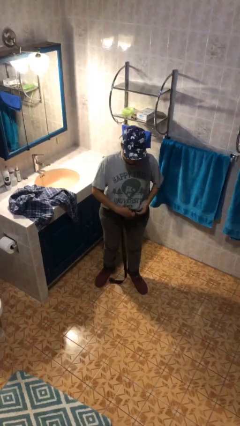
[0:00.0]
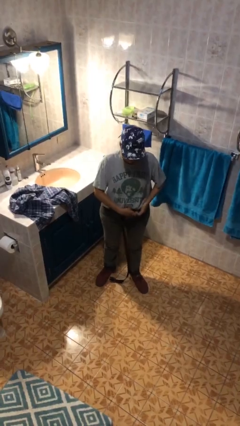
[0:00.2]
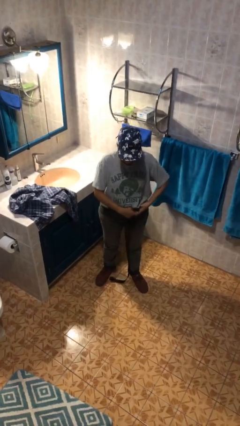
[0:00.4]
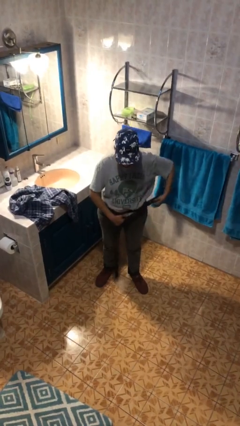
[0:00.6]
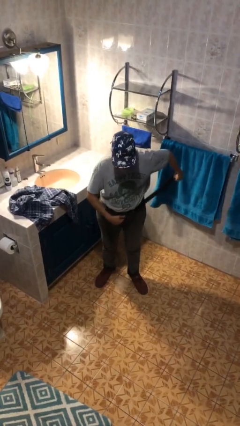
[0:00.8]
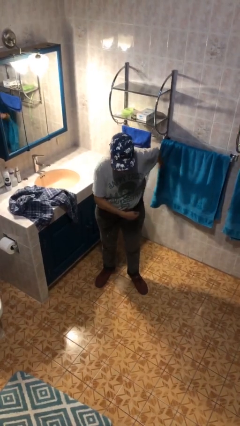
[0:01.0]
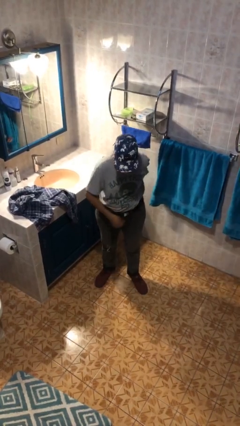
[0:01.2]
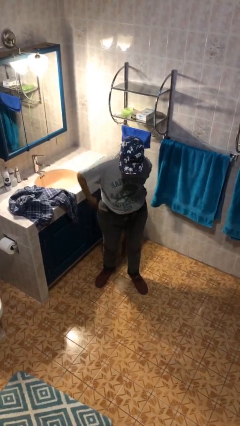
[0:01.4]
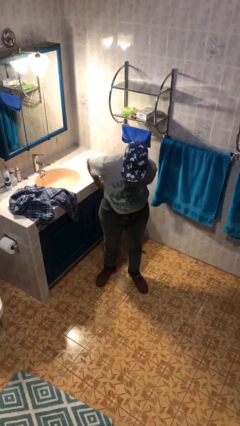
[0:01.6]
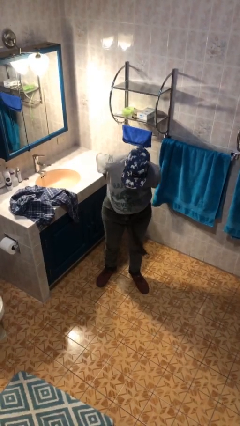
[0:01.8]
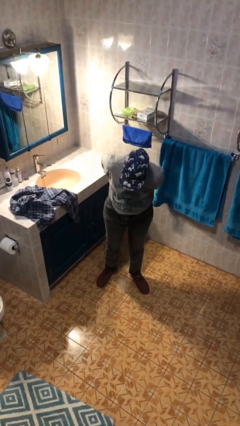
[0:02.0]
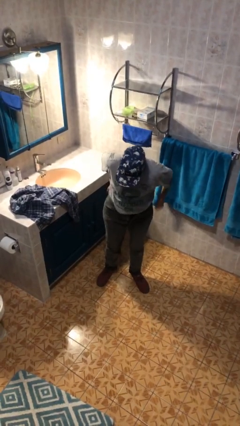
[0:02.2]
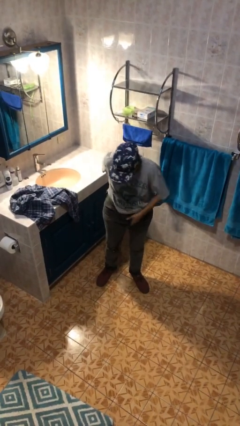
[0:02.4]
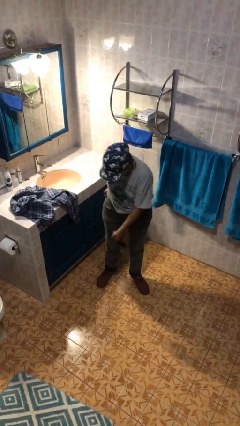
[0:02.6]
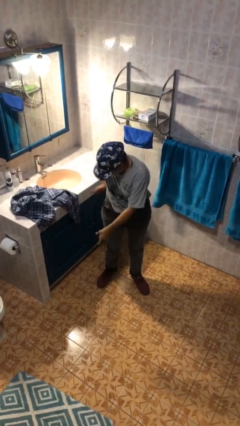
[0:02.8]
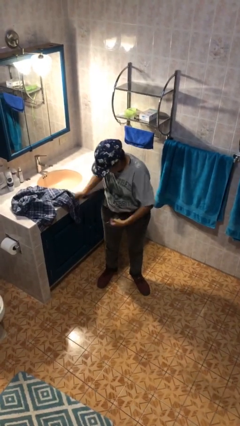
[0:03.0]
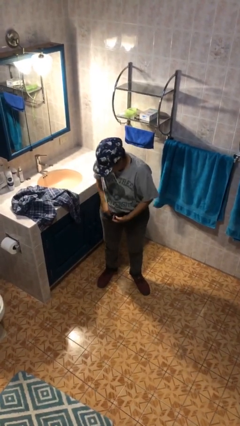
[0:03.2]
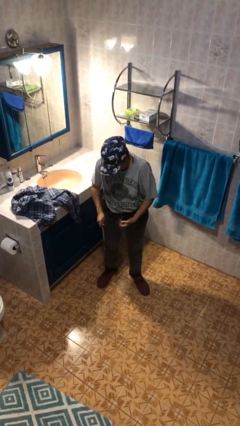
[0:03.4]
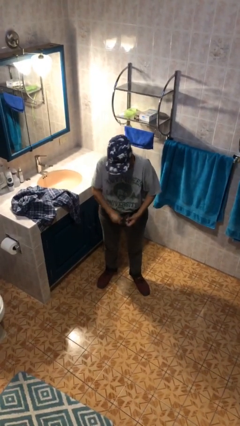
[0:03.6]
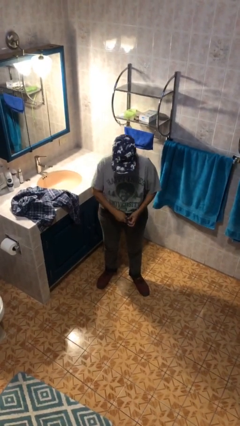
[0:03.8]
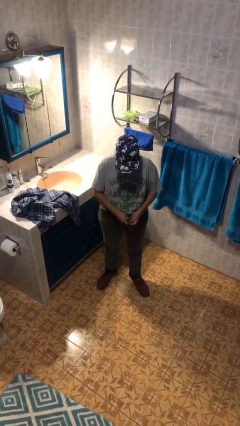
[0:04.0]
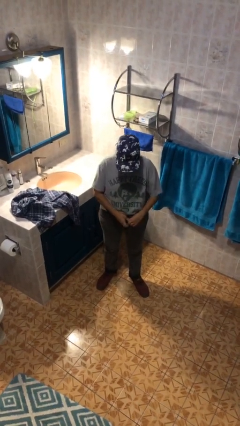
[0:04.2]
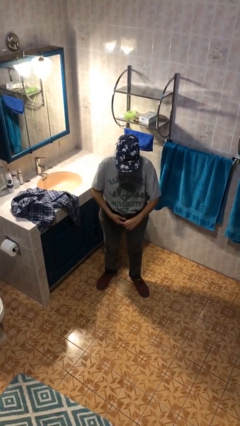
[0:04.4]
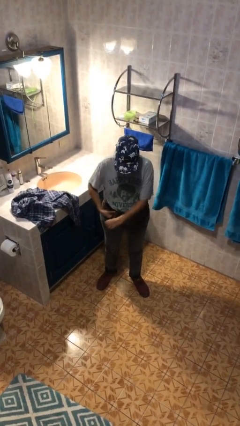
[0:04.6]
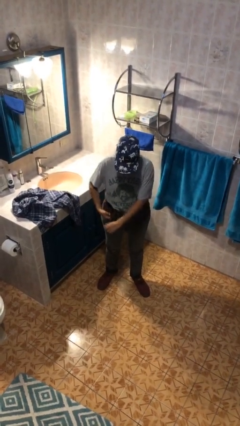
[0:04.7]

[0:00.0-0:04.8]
person puts on belt

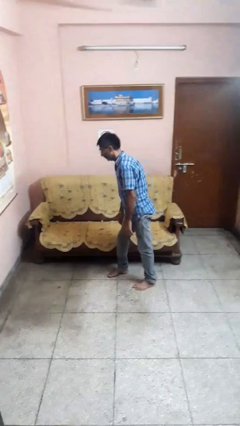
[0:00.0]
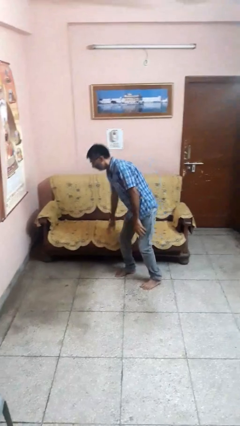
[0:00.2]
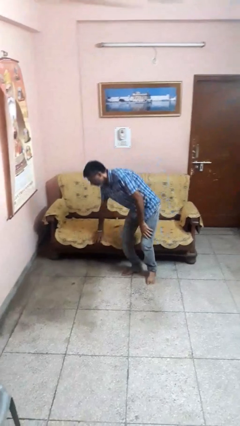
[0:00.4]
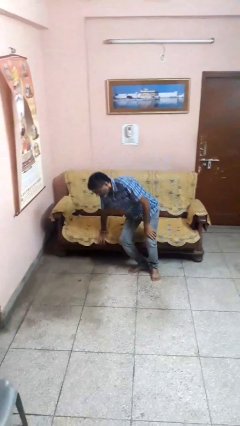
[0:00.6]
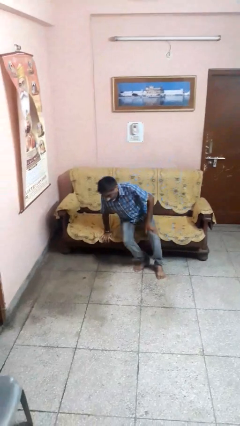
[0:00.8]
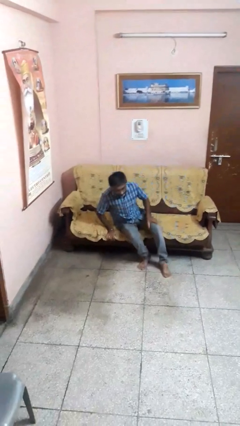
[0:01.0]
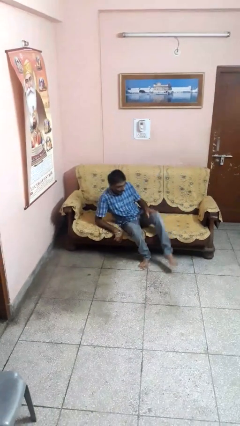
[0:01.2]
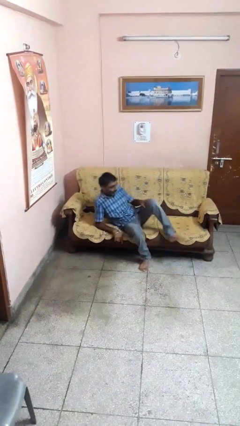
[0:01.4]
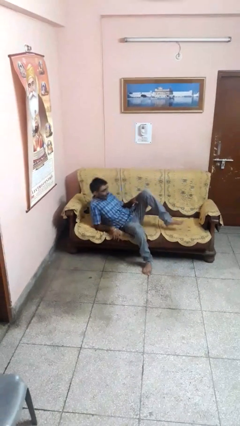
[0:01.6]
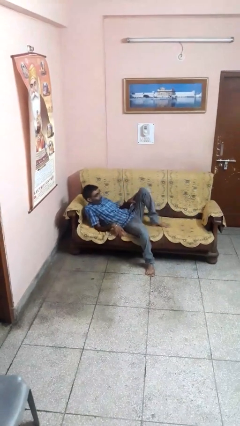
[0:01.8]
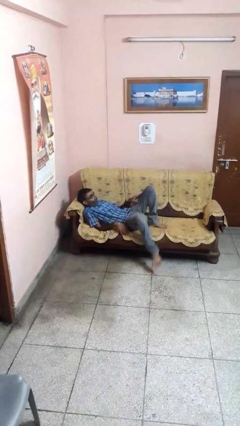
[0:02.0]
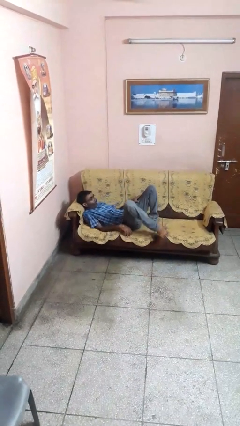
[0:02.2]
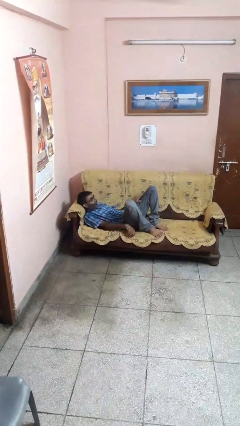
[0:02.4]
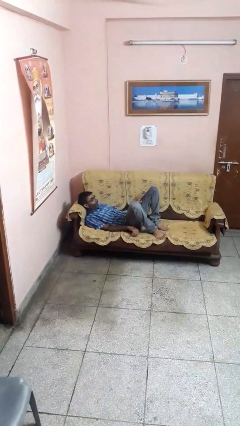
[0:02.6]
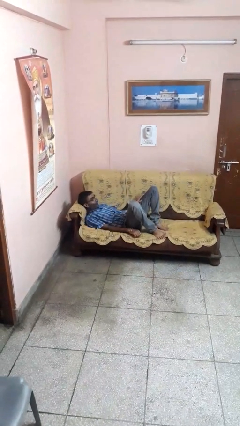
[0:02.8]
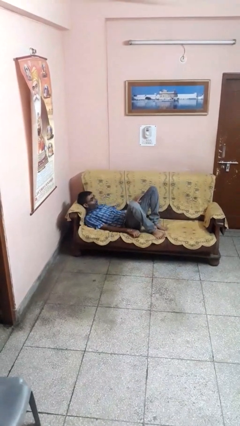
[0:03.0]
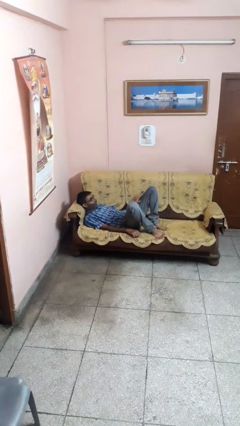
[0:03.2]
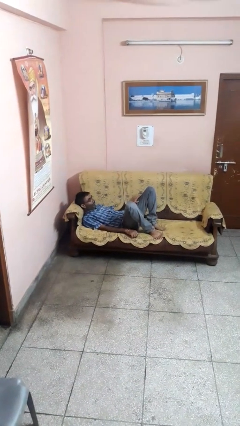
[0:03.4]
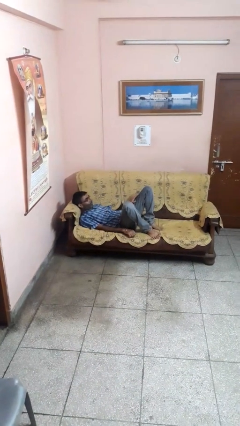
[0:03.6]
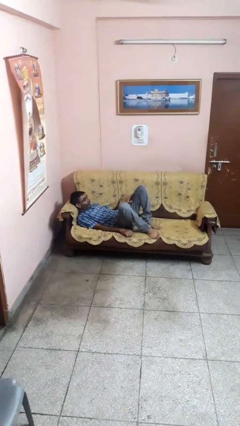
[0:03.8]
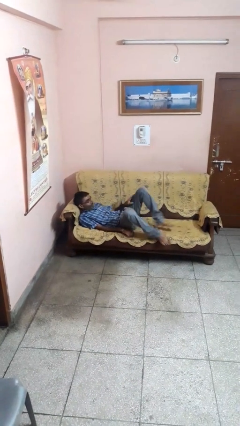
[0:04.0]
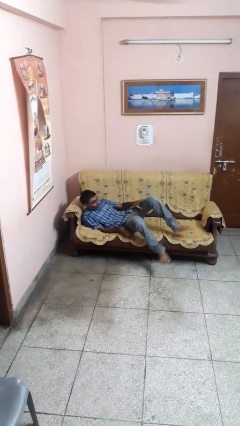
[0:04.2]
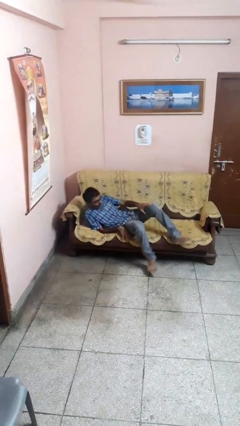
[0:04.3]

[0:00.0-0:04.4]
person lies down on couch

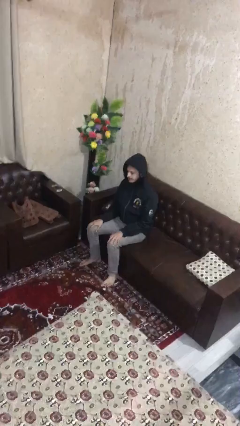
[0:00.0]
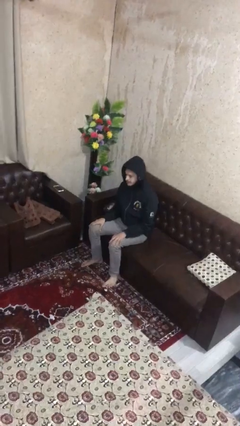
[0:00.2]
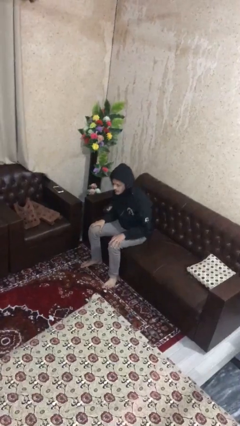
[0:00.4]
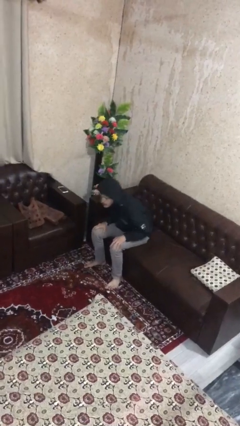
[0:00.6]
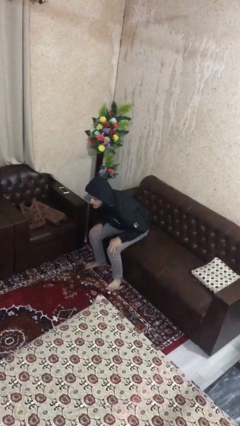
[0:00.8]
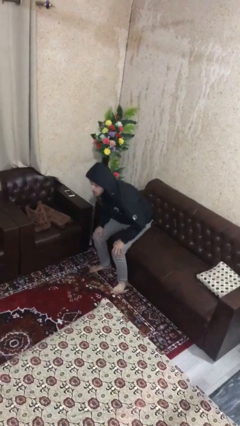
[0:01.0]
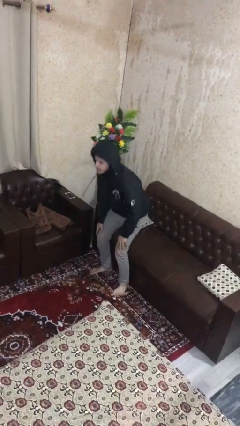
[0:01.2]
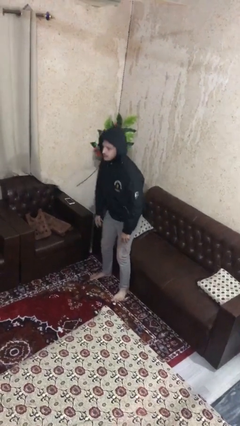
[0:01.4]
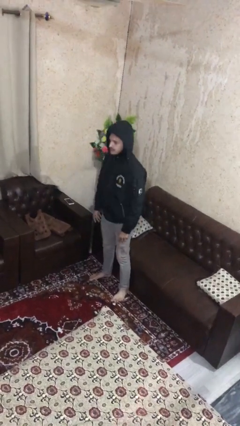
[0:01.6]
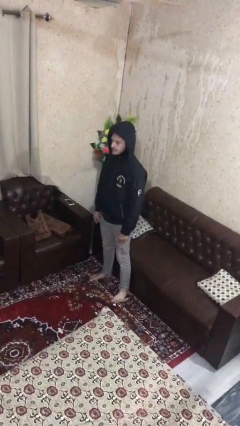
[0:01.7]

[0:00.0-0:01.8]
person stands up

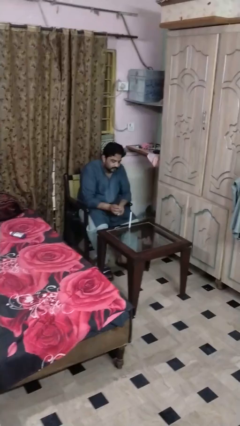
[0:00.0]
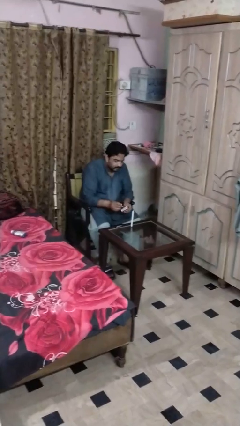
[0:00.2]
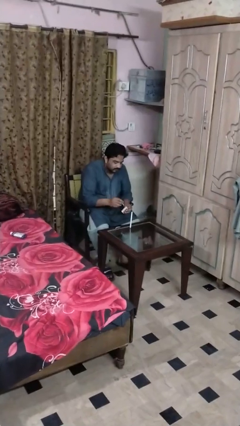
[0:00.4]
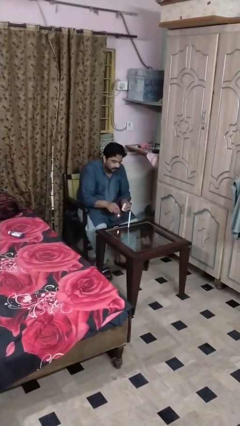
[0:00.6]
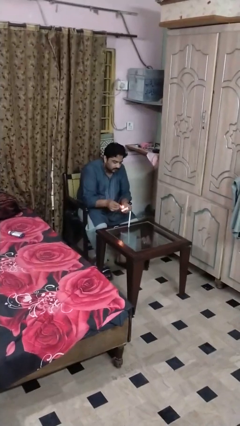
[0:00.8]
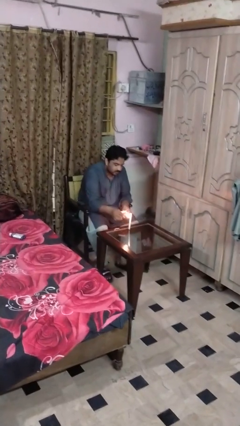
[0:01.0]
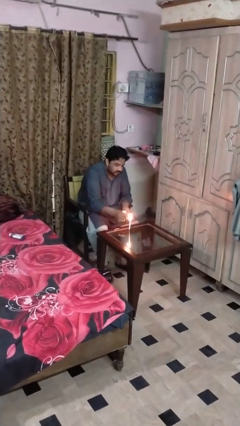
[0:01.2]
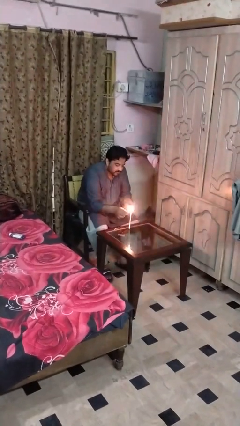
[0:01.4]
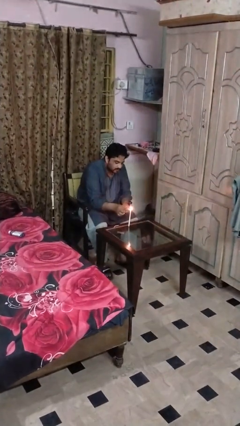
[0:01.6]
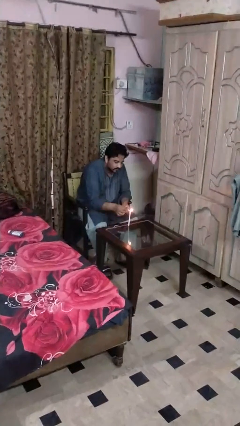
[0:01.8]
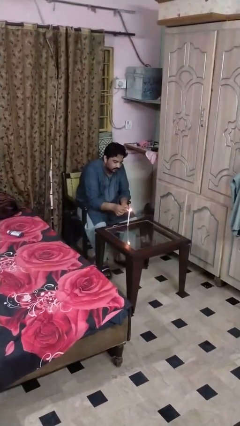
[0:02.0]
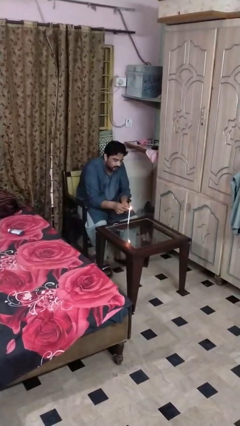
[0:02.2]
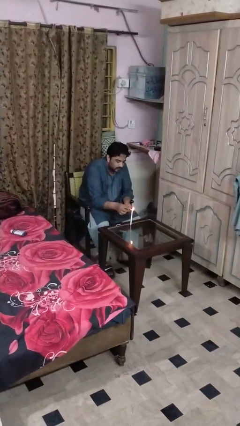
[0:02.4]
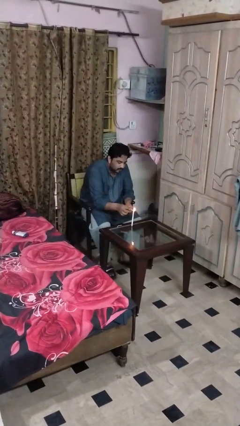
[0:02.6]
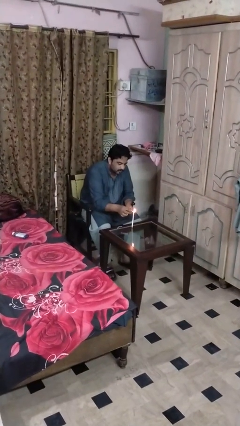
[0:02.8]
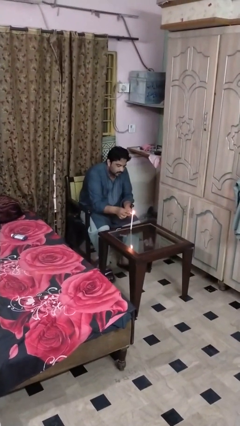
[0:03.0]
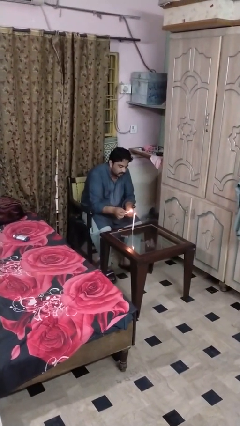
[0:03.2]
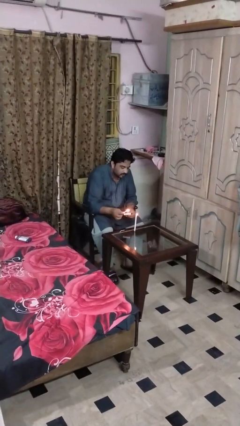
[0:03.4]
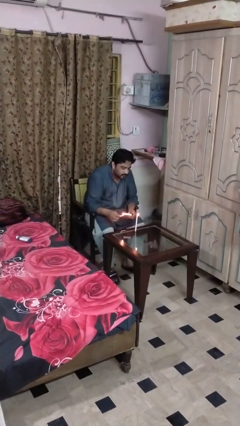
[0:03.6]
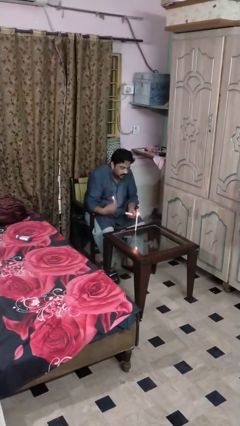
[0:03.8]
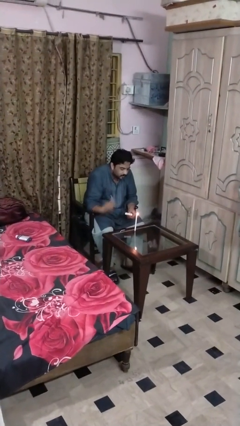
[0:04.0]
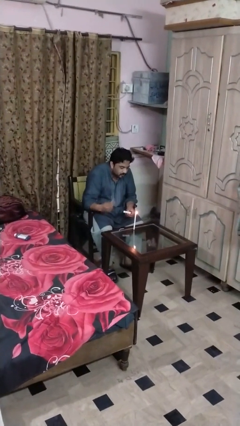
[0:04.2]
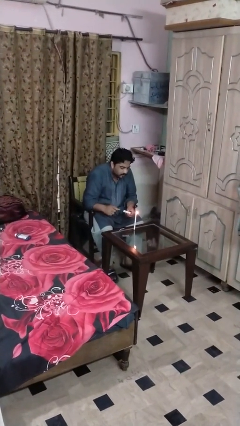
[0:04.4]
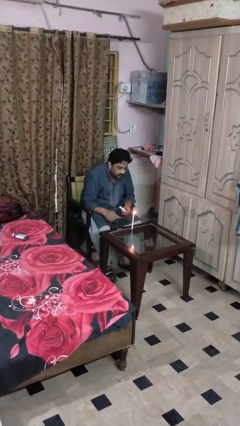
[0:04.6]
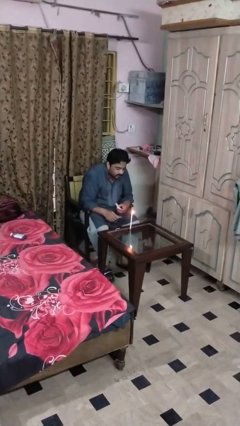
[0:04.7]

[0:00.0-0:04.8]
person lights candle

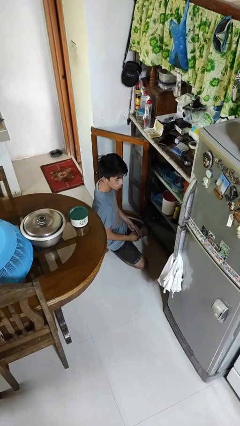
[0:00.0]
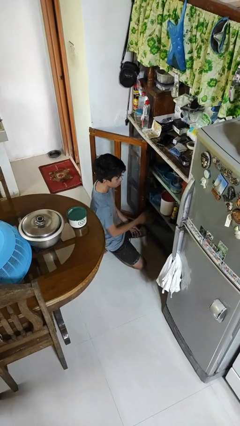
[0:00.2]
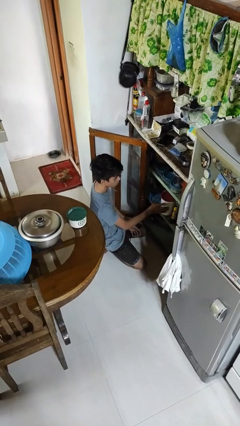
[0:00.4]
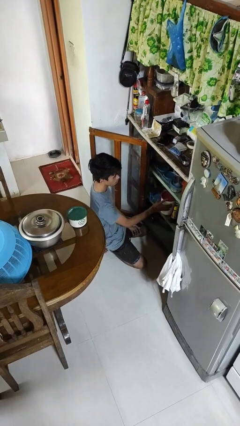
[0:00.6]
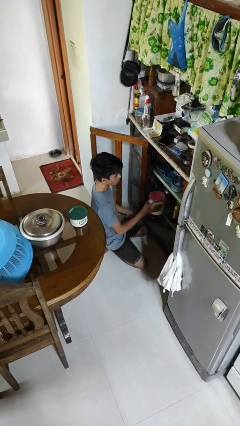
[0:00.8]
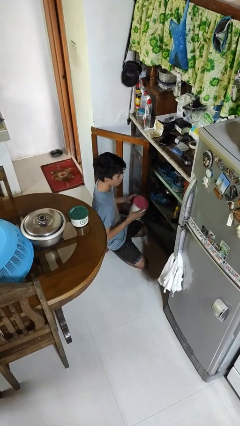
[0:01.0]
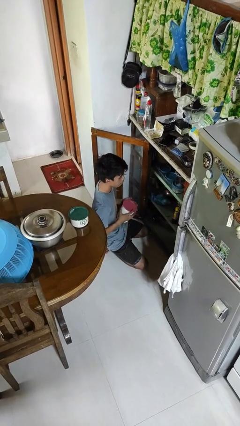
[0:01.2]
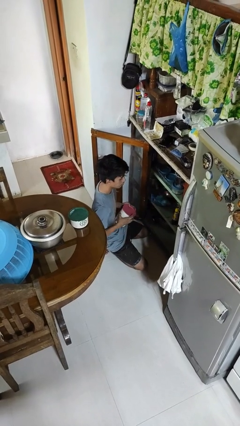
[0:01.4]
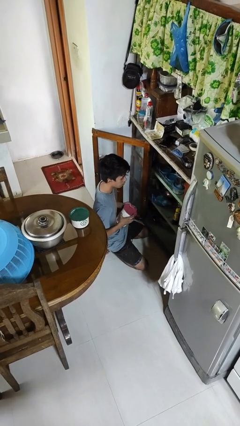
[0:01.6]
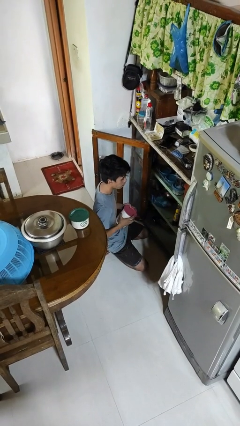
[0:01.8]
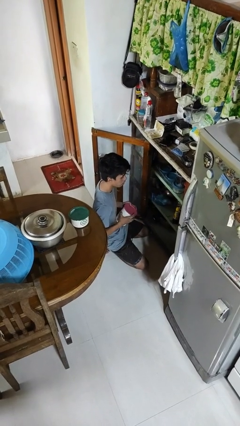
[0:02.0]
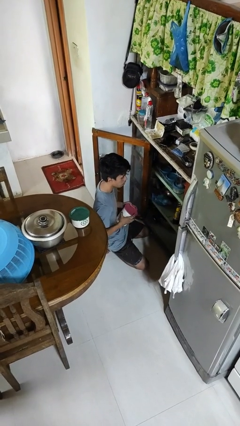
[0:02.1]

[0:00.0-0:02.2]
person picks up object from cabinet
